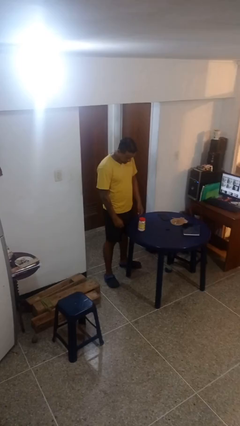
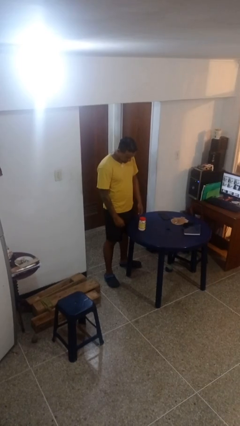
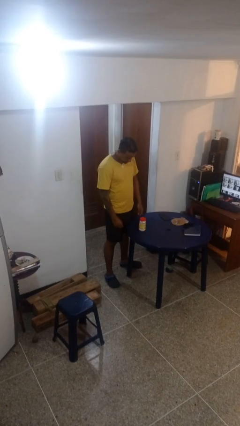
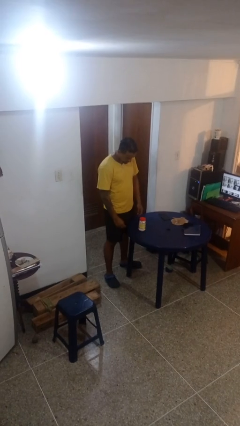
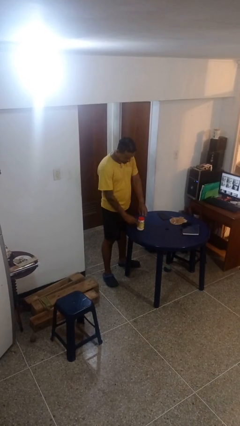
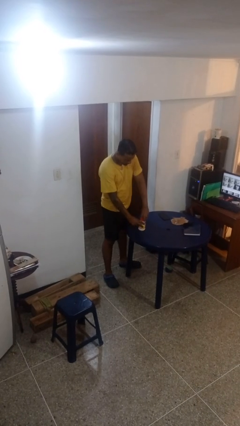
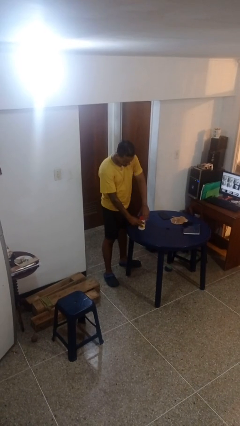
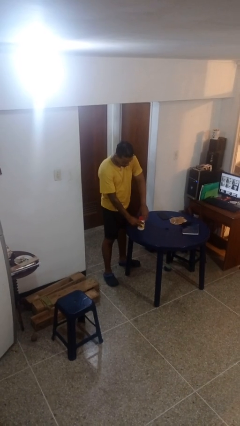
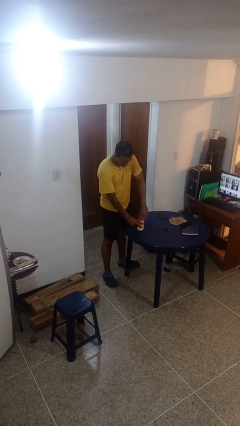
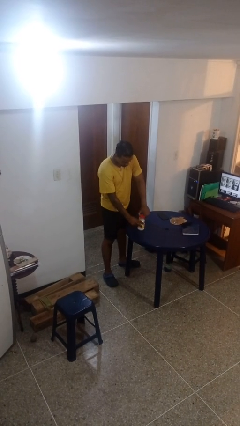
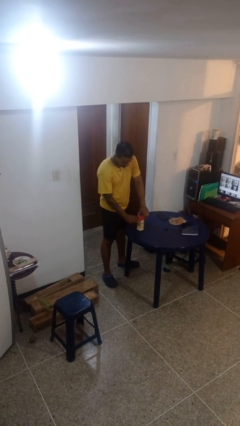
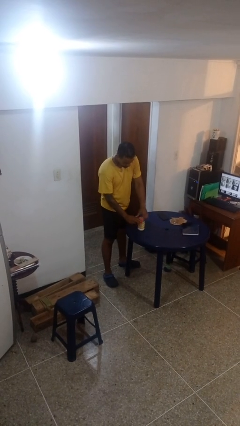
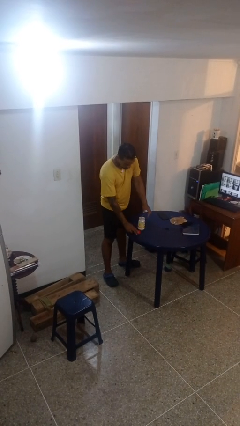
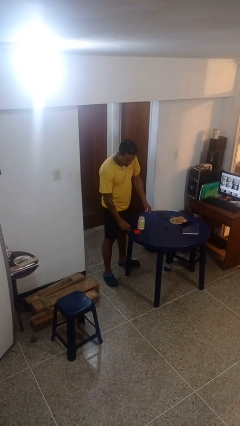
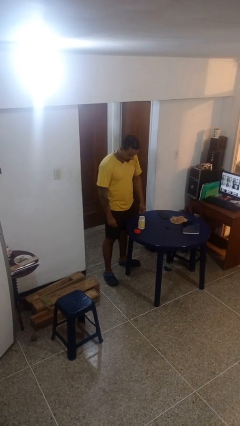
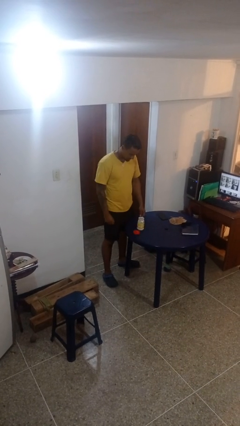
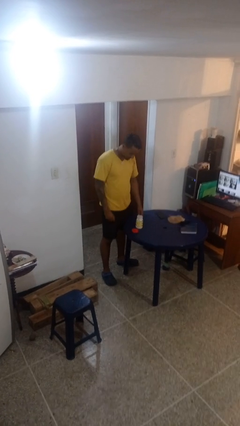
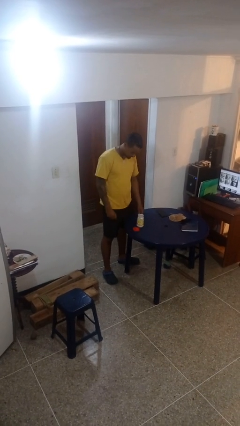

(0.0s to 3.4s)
person opens jar

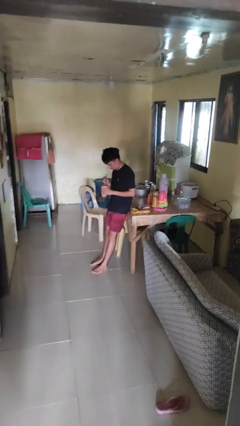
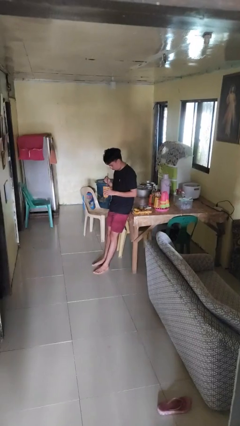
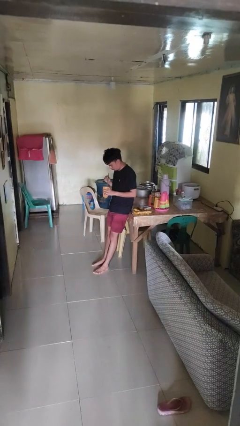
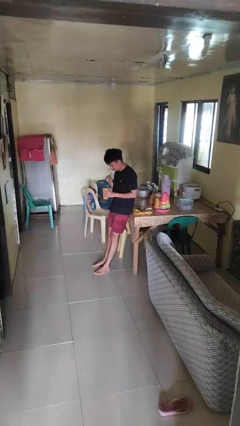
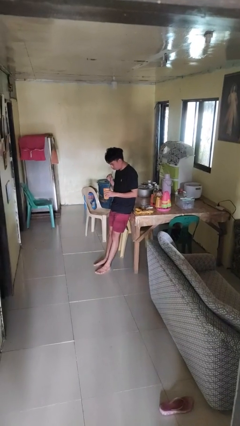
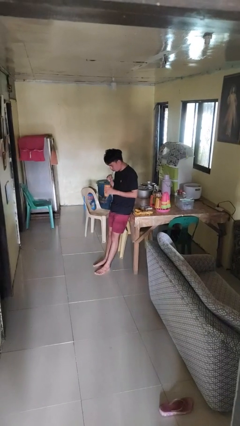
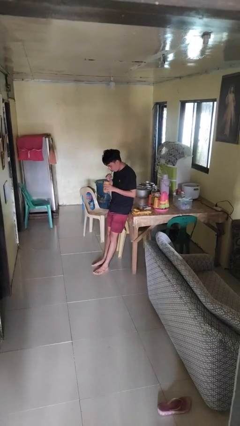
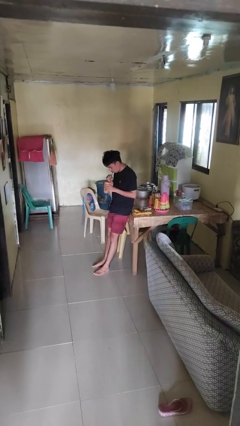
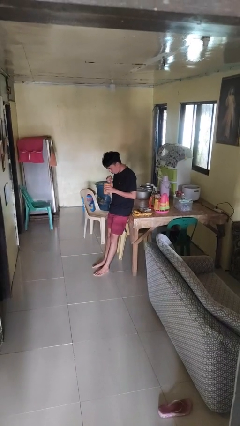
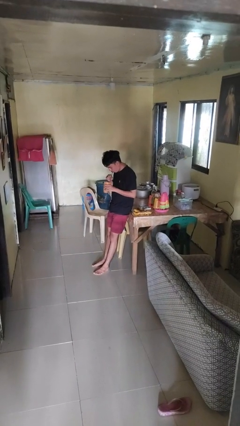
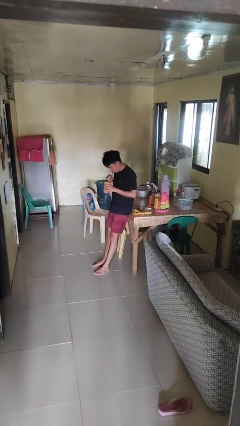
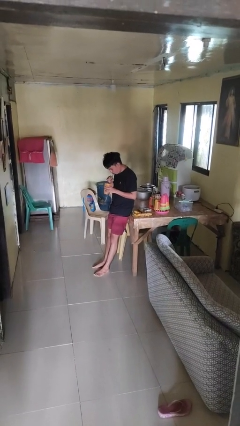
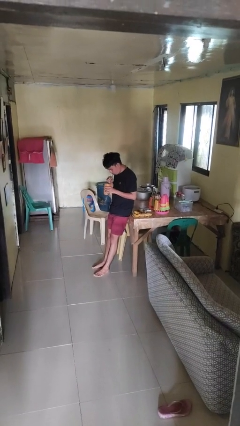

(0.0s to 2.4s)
person drinks from straw

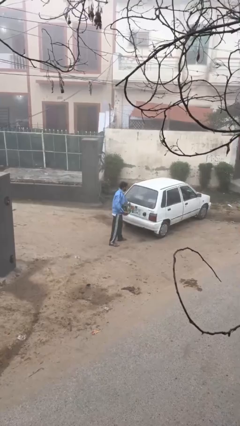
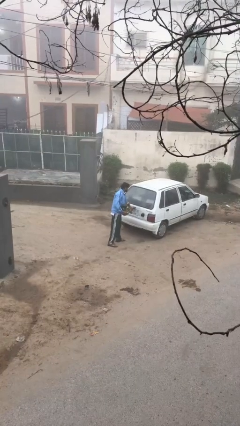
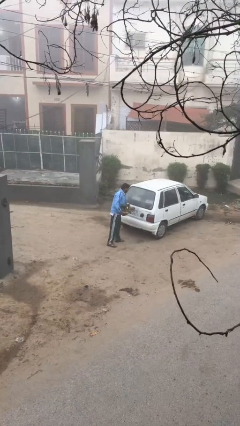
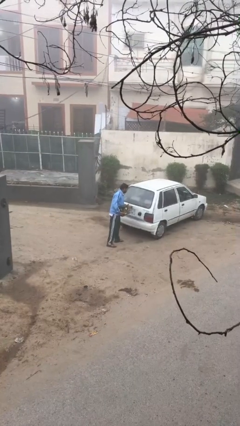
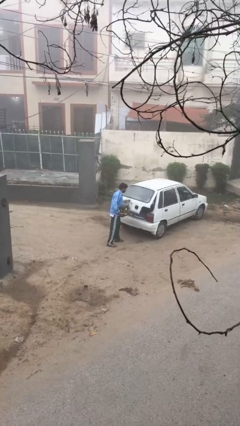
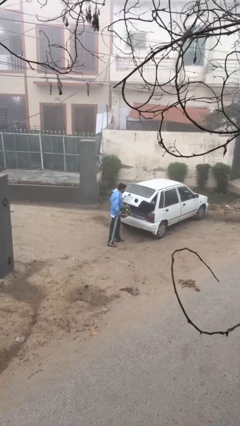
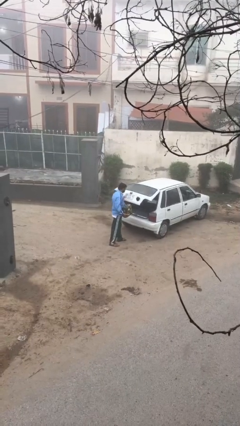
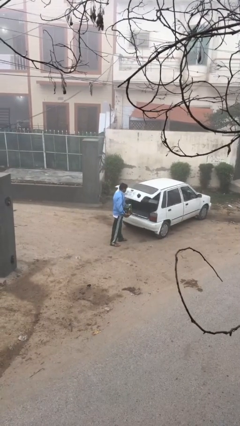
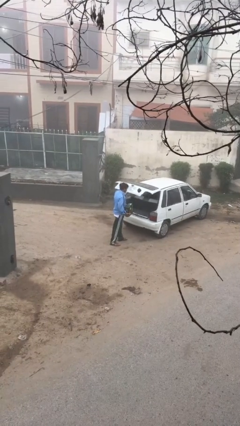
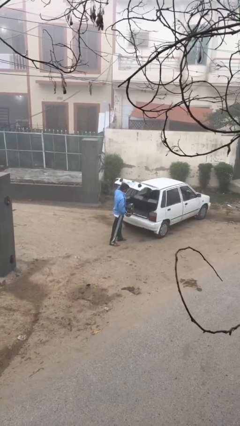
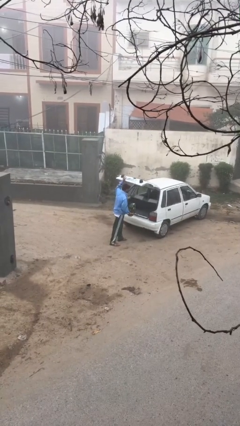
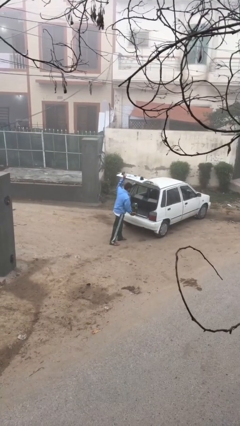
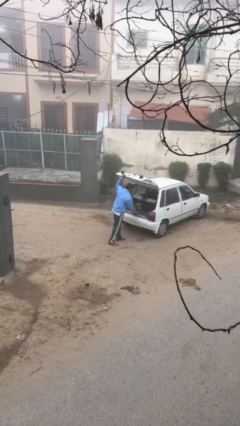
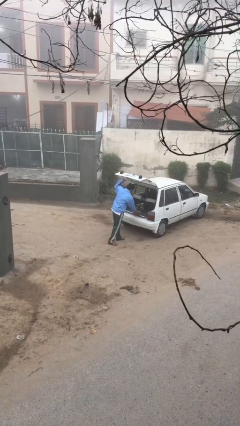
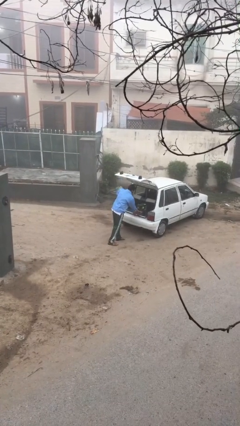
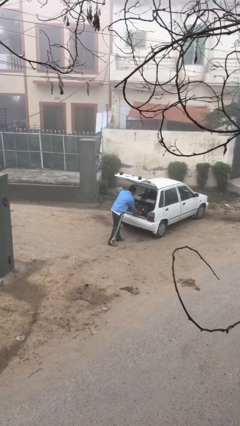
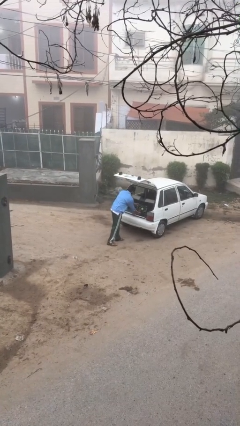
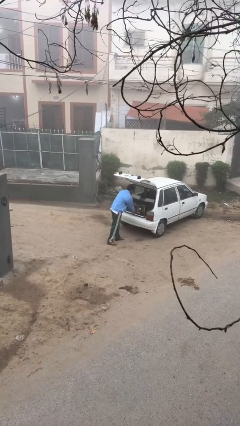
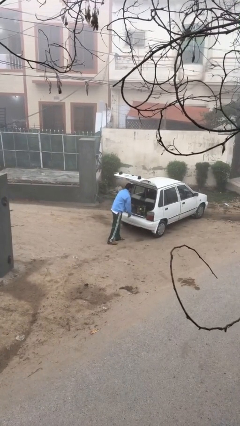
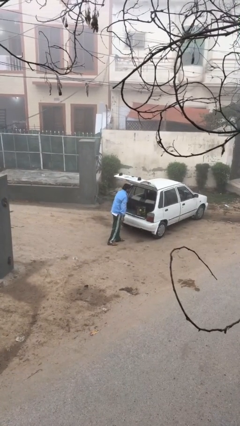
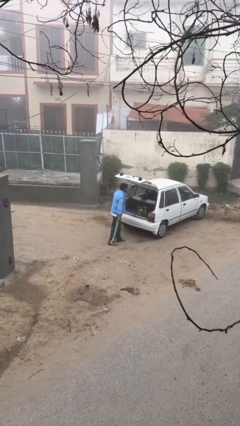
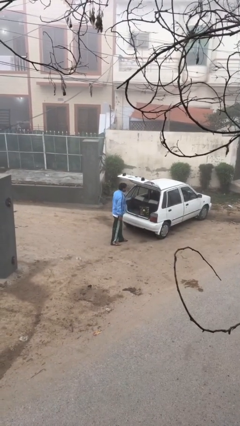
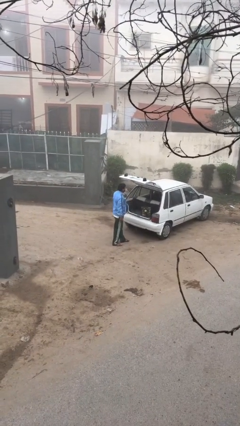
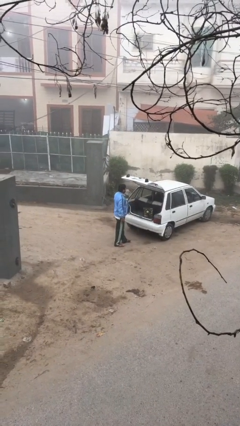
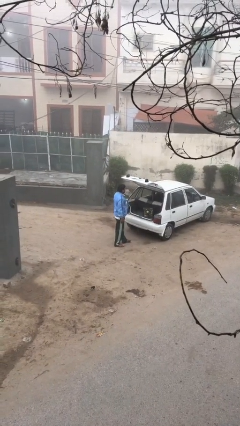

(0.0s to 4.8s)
person loads car

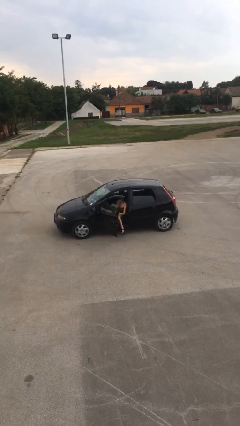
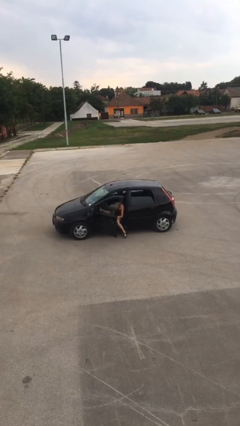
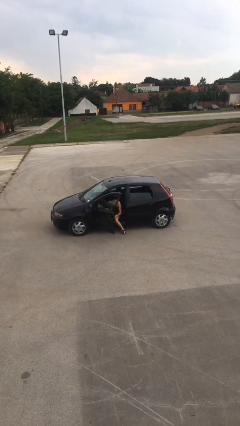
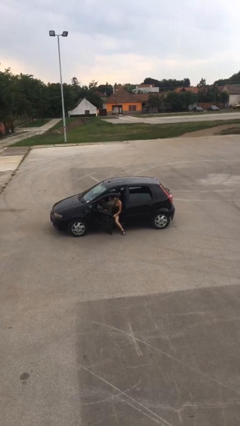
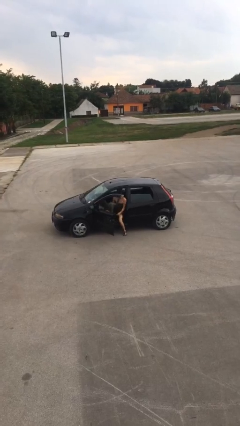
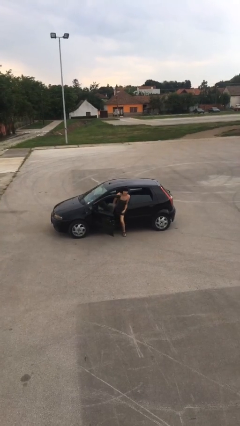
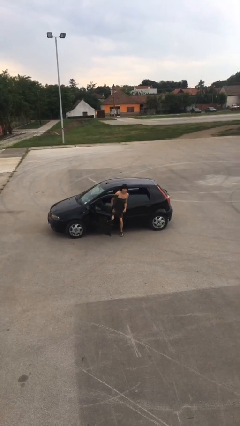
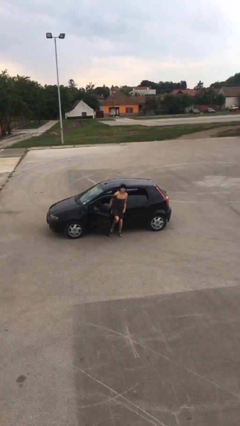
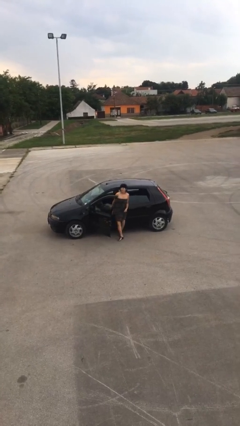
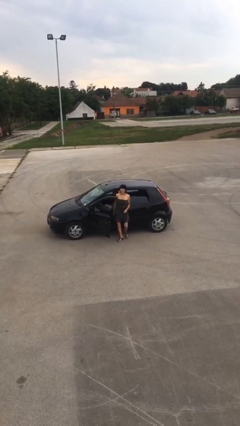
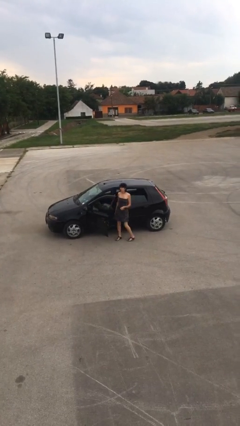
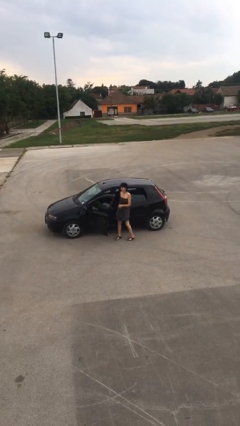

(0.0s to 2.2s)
person exits car

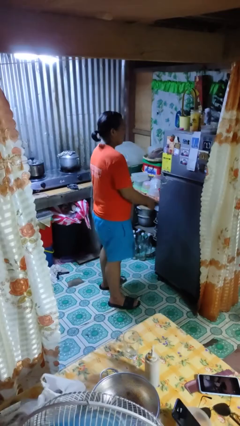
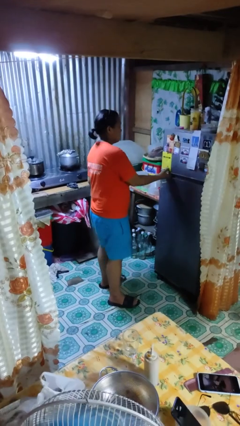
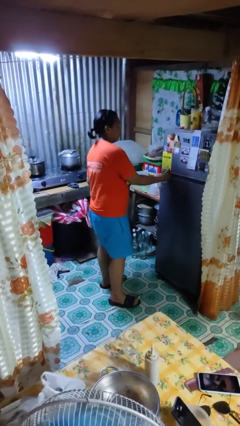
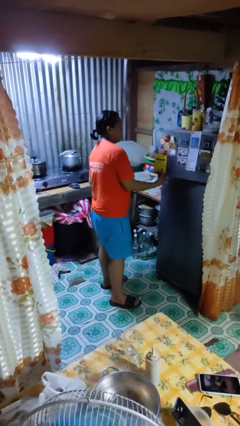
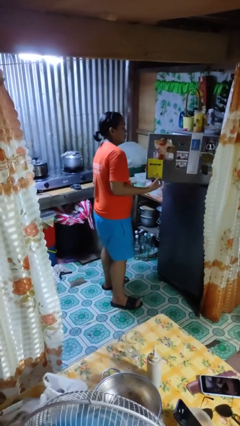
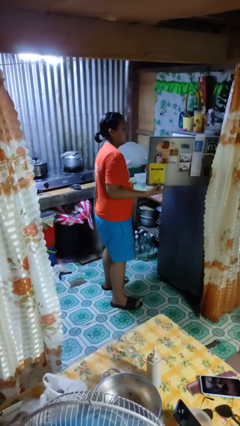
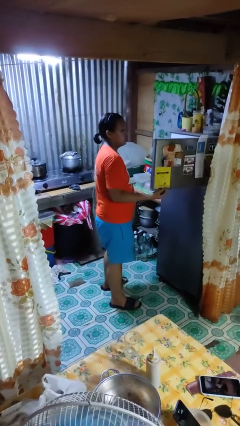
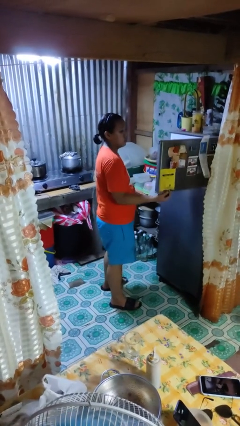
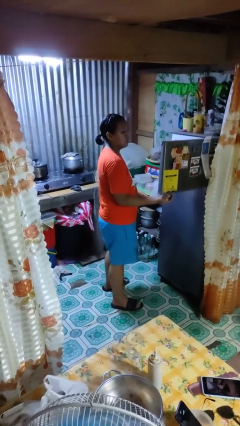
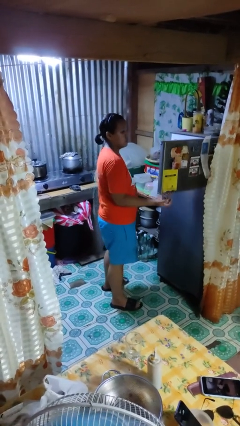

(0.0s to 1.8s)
person opens refrigerator

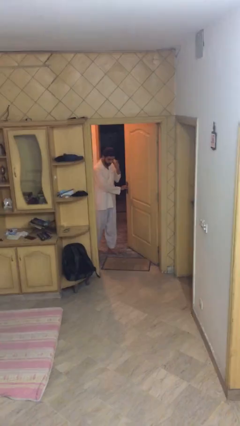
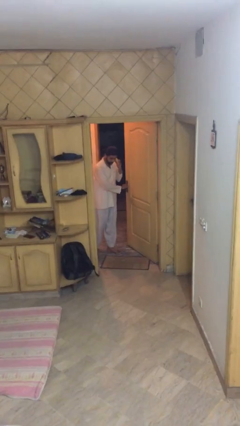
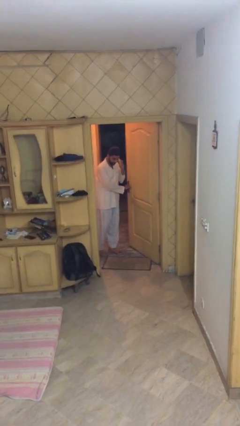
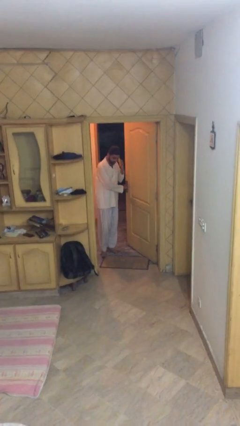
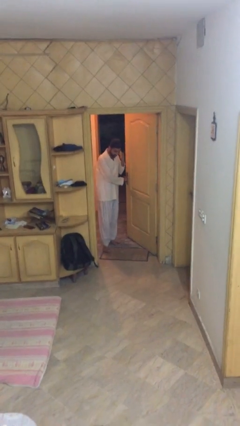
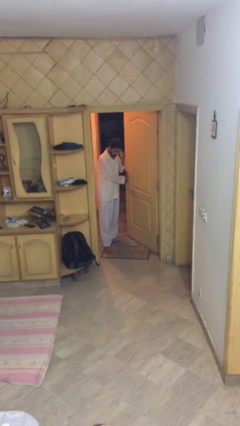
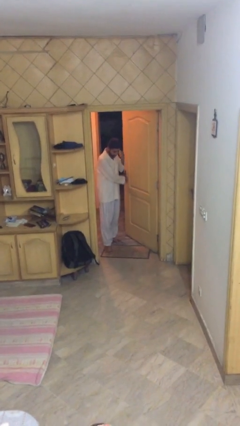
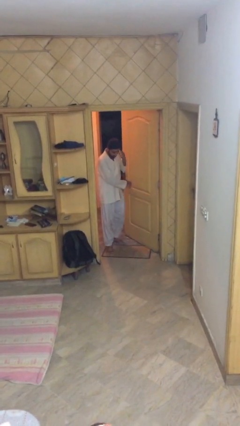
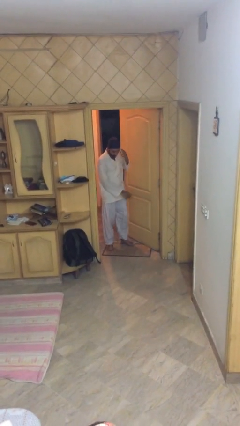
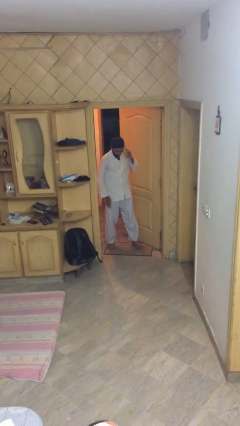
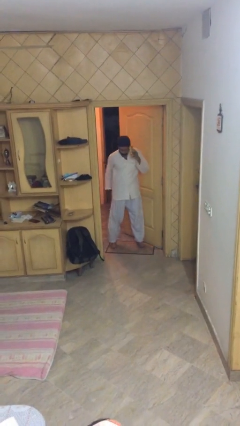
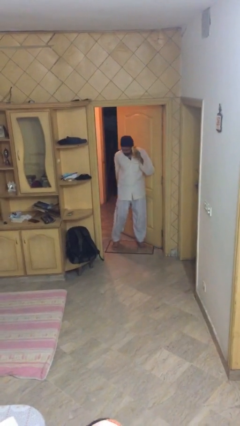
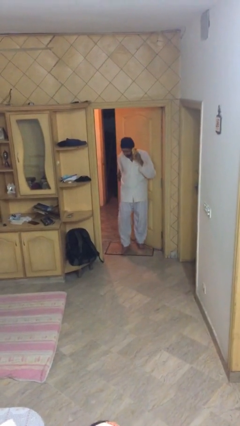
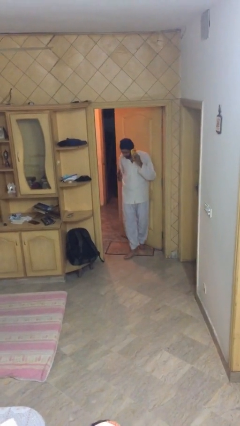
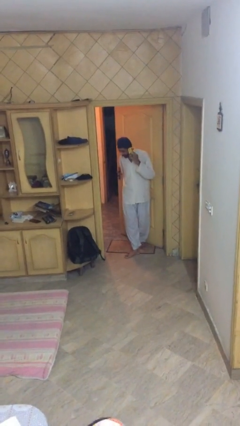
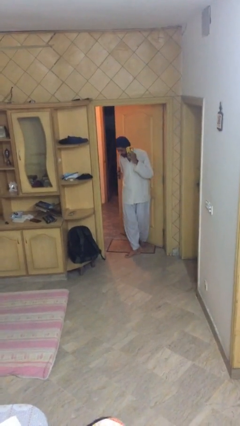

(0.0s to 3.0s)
person enters scene through structure
